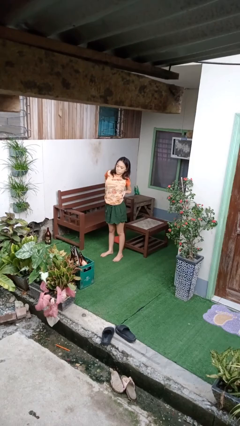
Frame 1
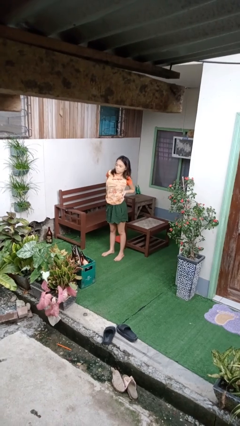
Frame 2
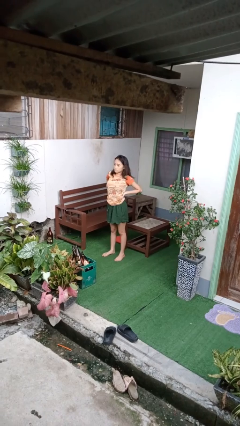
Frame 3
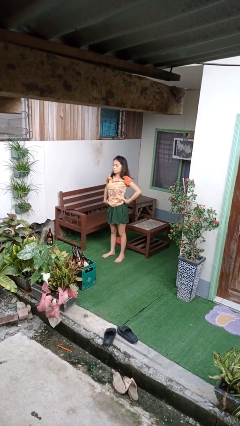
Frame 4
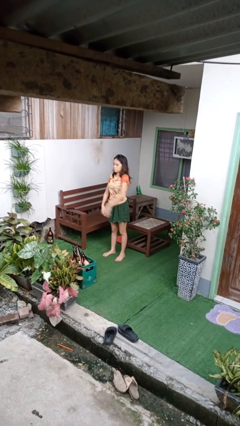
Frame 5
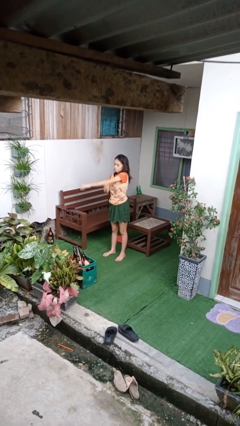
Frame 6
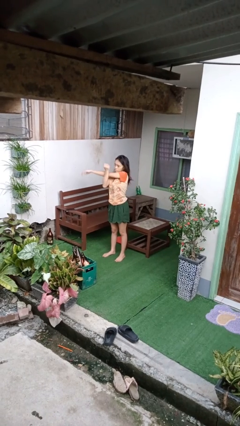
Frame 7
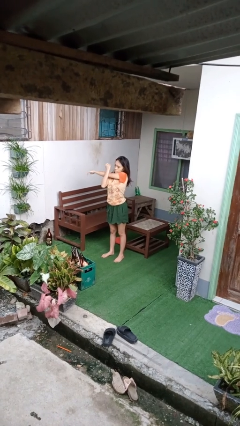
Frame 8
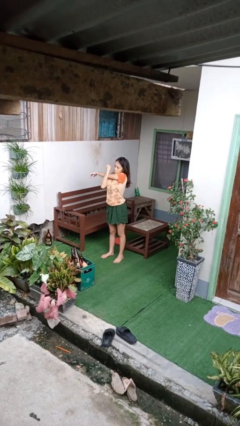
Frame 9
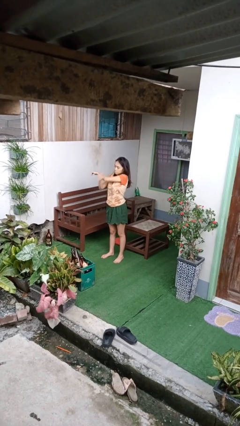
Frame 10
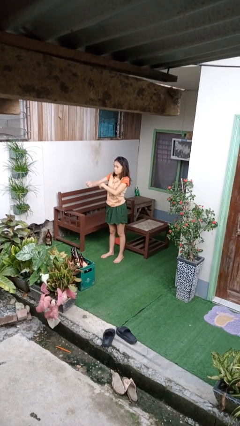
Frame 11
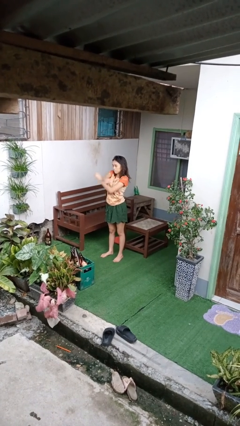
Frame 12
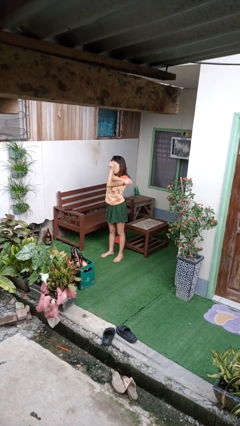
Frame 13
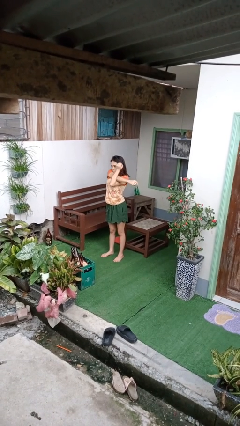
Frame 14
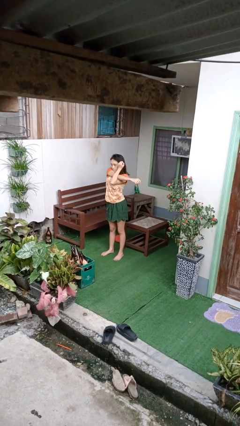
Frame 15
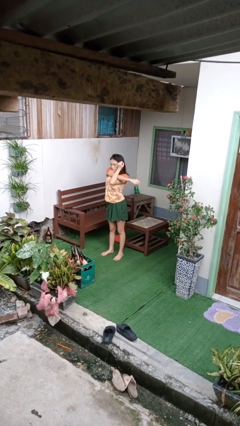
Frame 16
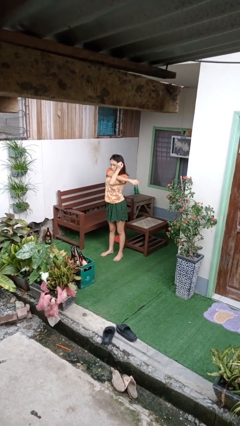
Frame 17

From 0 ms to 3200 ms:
person stretches arms to side

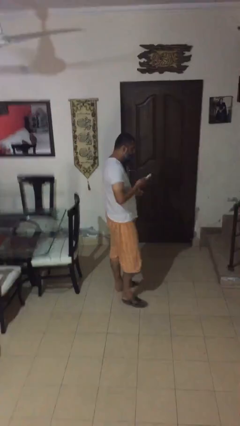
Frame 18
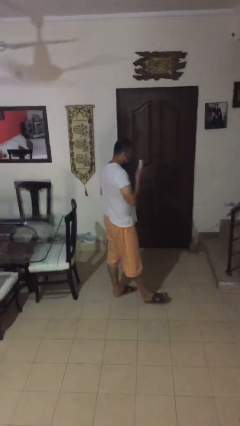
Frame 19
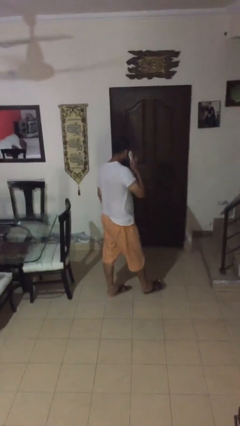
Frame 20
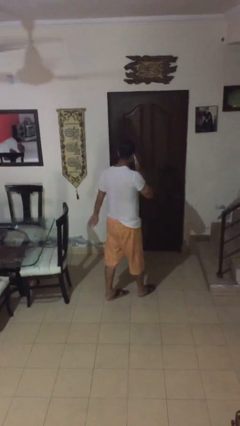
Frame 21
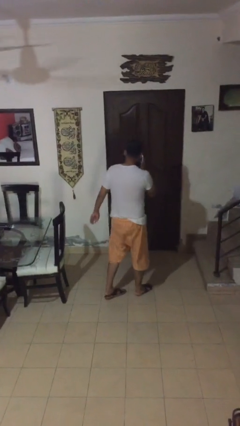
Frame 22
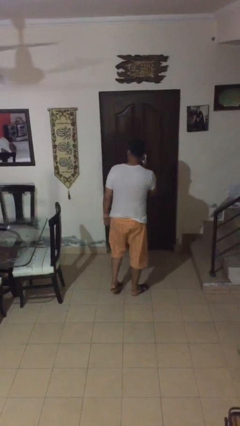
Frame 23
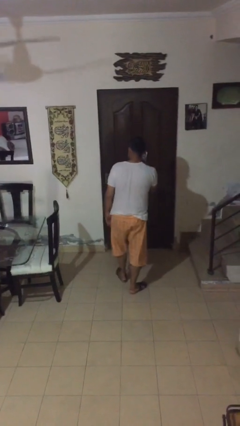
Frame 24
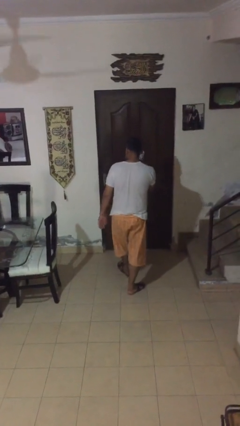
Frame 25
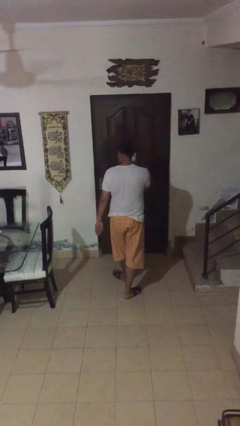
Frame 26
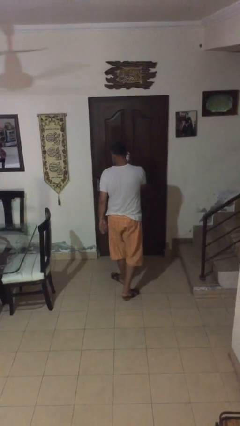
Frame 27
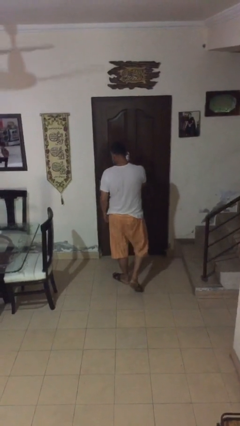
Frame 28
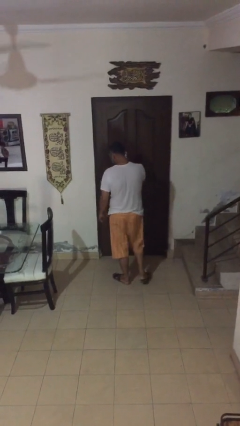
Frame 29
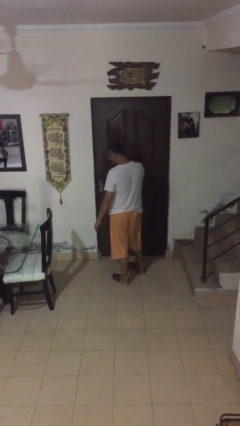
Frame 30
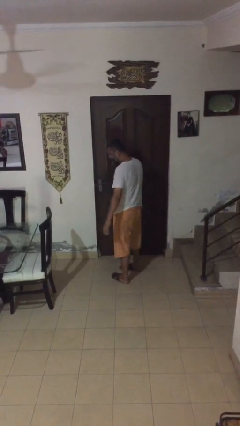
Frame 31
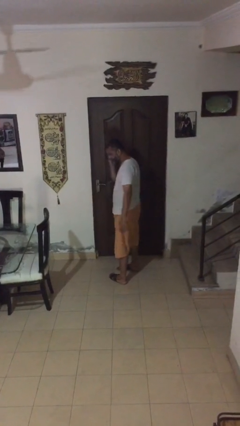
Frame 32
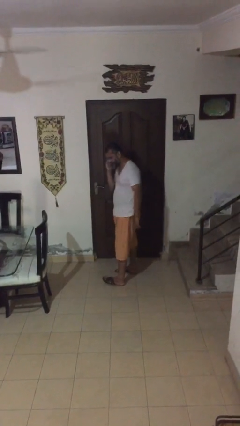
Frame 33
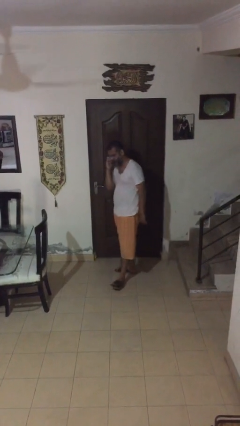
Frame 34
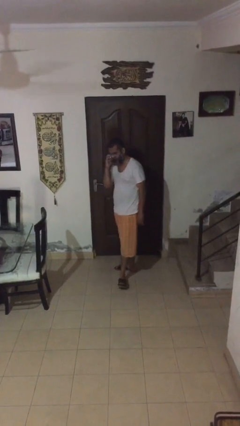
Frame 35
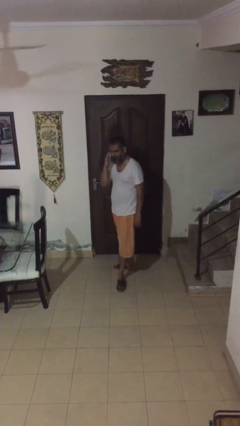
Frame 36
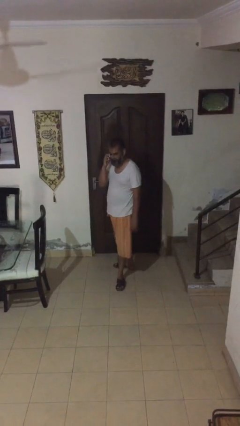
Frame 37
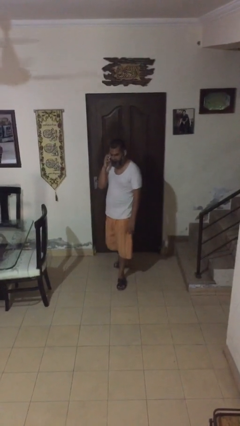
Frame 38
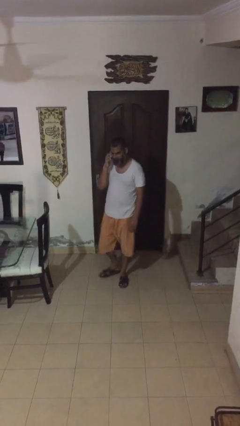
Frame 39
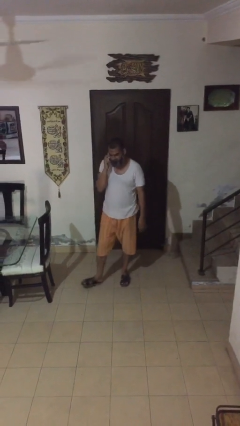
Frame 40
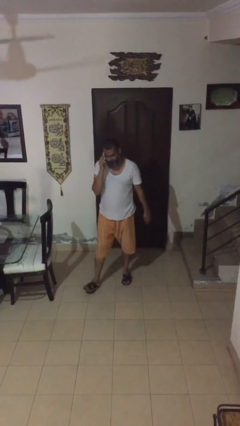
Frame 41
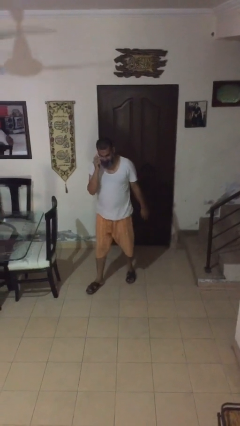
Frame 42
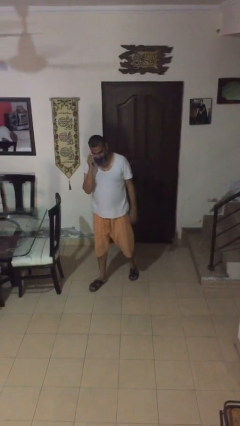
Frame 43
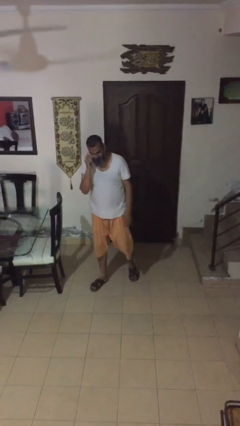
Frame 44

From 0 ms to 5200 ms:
person talks on phone

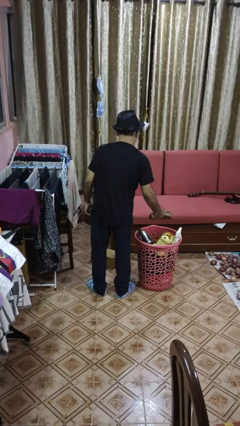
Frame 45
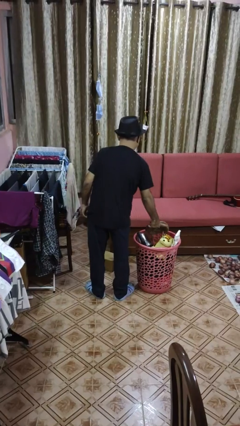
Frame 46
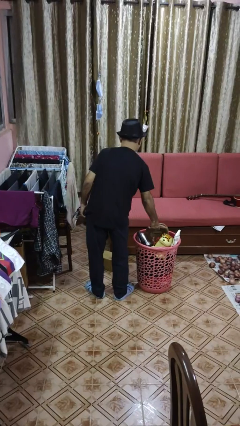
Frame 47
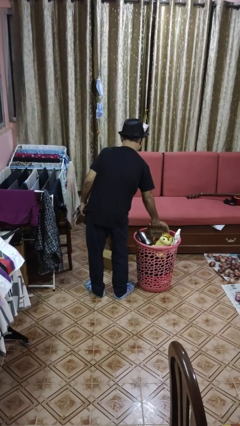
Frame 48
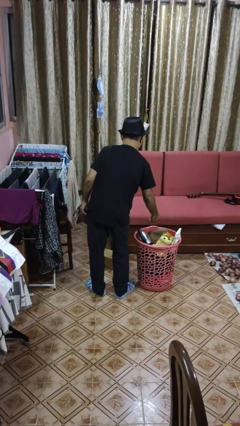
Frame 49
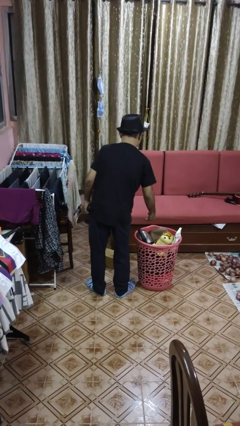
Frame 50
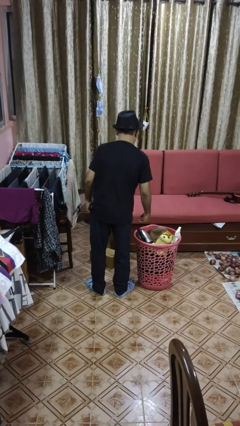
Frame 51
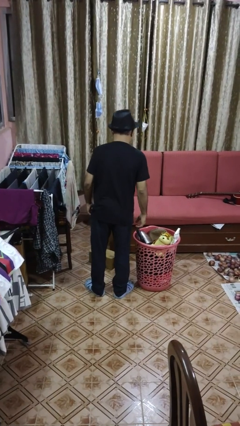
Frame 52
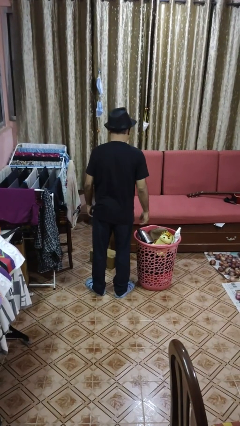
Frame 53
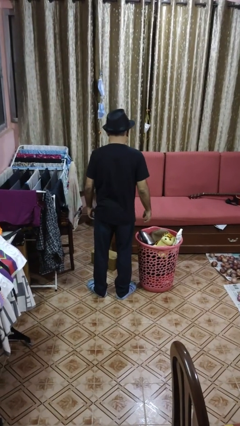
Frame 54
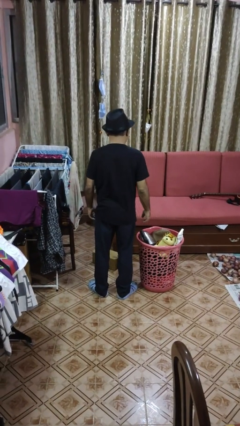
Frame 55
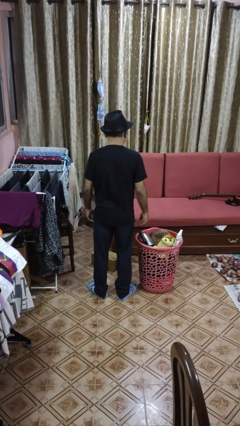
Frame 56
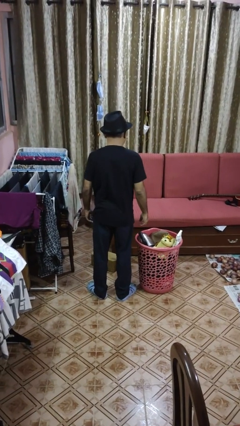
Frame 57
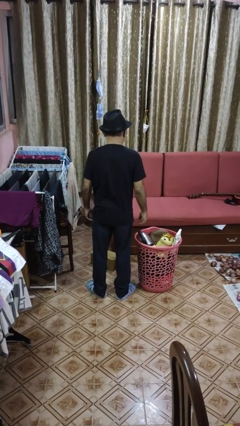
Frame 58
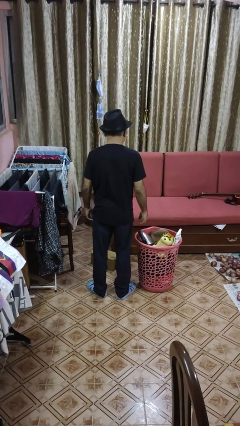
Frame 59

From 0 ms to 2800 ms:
person puts object into basket

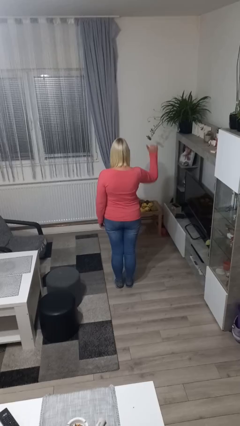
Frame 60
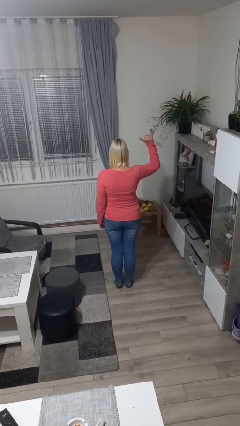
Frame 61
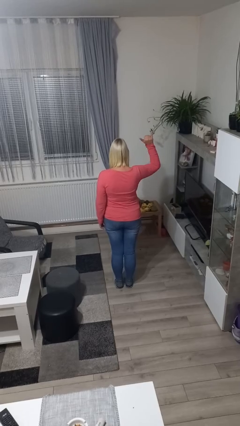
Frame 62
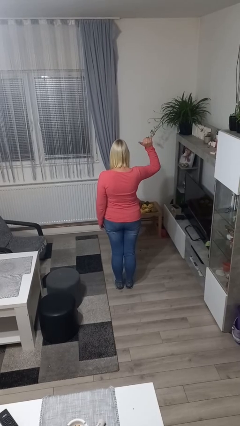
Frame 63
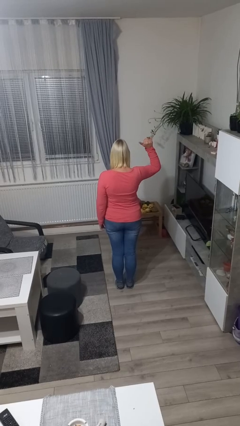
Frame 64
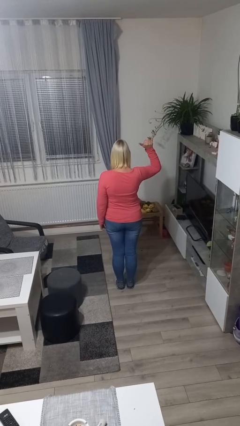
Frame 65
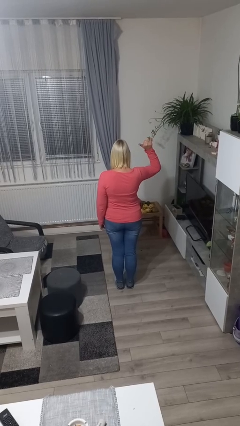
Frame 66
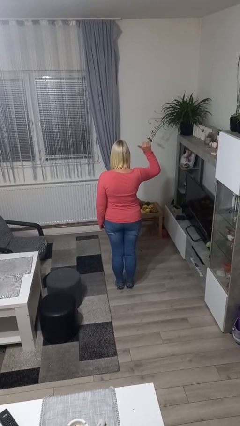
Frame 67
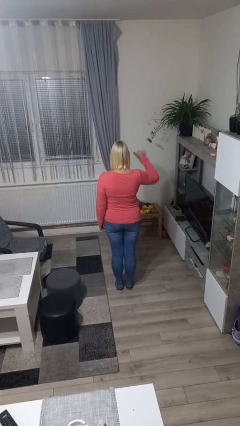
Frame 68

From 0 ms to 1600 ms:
person gestures hang loose

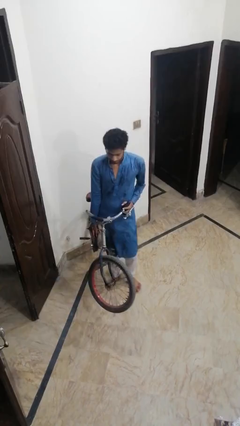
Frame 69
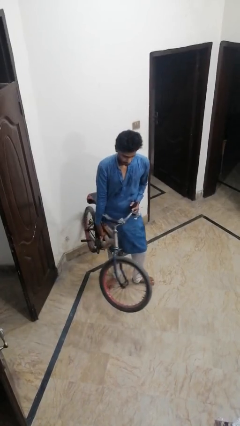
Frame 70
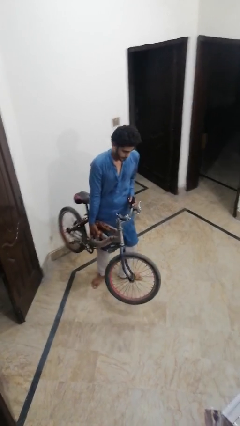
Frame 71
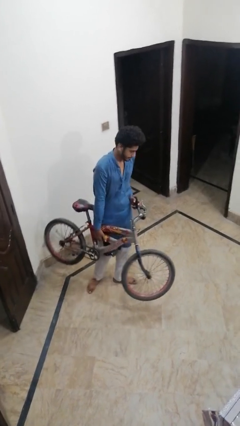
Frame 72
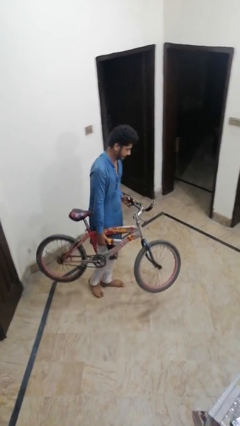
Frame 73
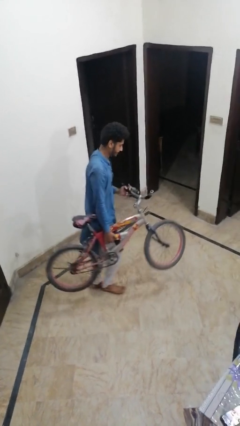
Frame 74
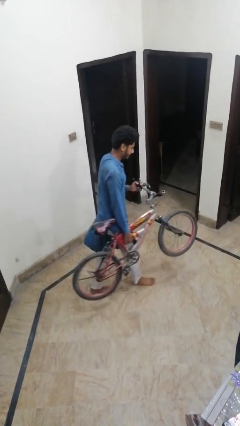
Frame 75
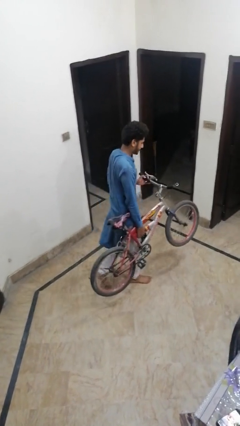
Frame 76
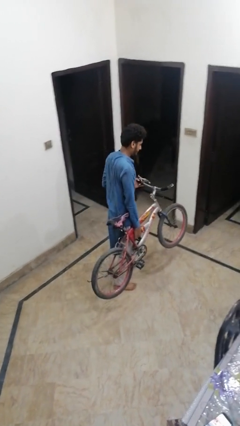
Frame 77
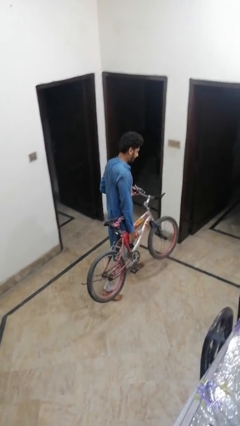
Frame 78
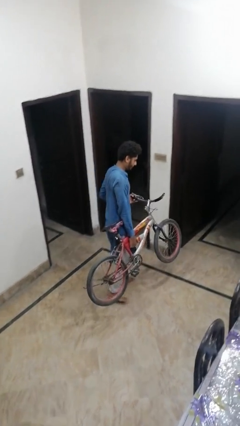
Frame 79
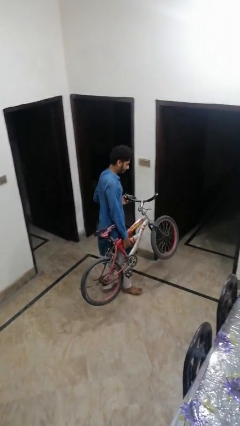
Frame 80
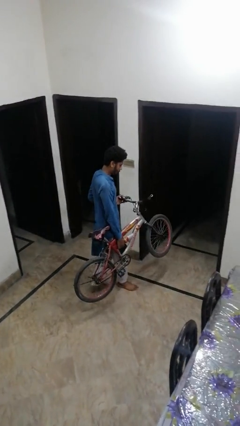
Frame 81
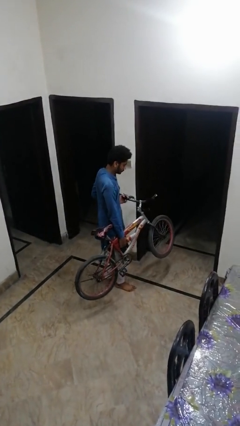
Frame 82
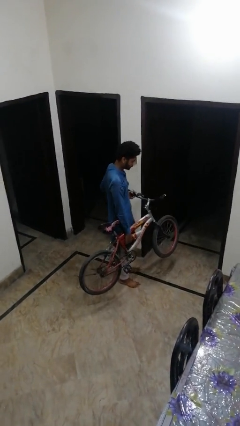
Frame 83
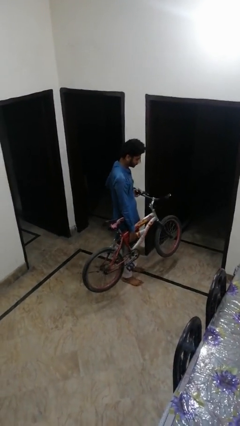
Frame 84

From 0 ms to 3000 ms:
person carries bicycle

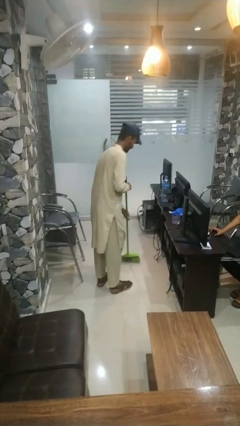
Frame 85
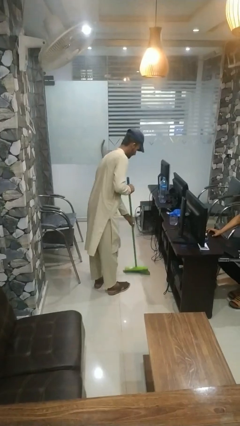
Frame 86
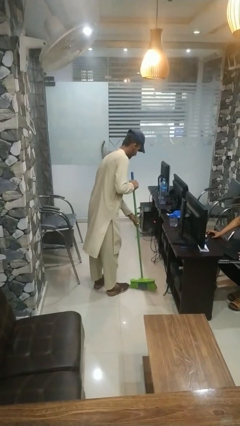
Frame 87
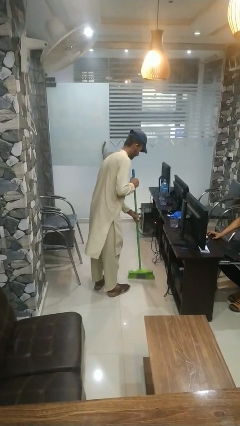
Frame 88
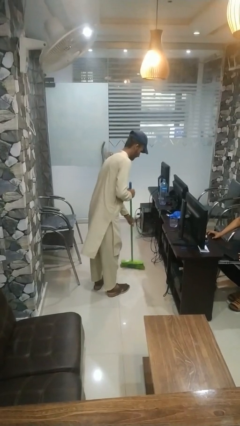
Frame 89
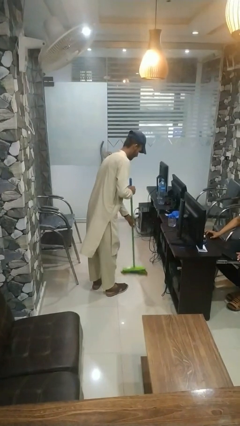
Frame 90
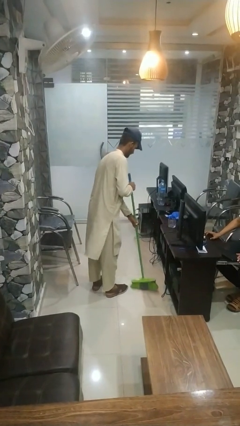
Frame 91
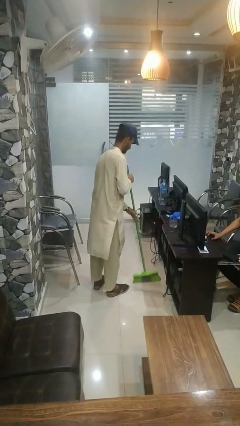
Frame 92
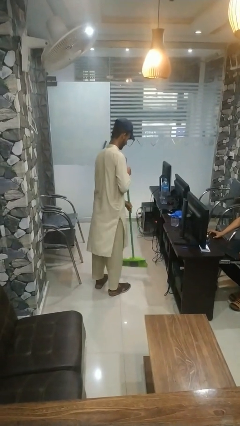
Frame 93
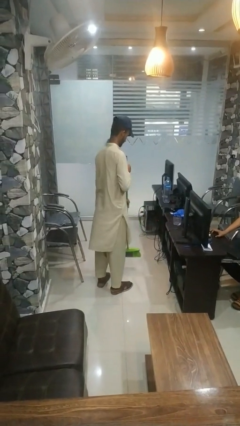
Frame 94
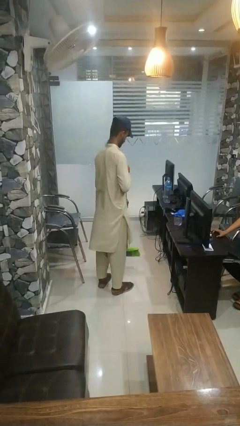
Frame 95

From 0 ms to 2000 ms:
person sweeps floor
